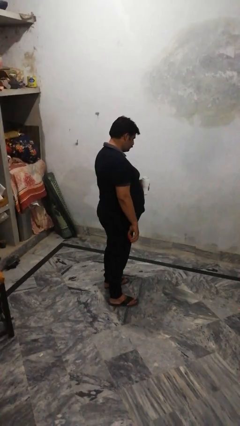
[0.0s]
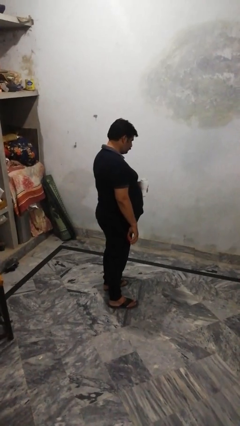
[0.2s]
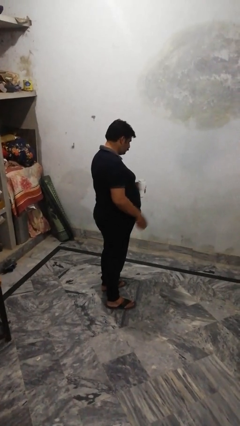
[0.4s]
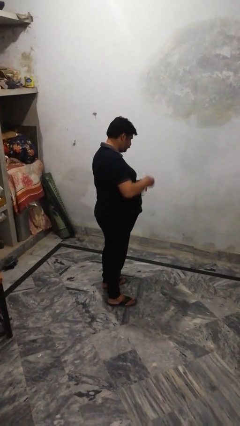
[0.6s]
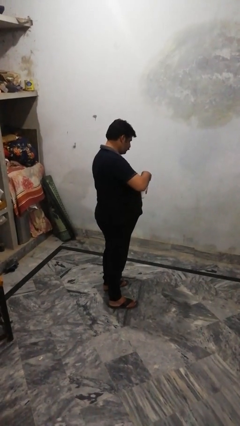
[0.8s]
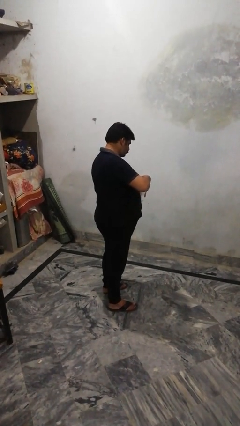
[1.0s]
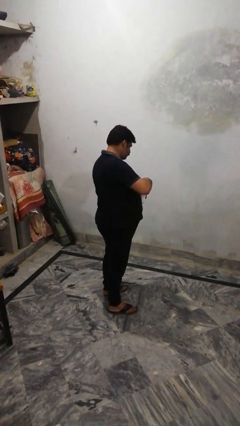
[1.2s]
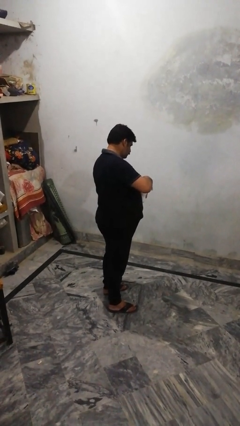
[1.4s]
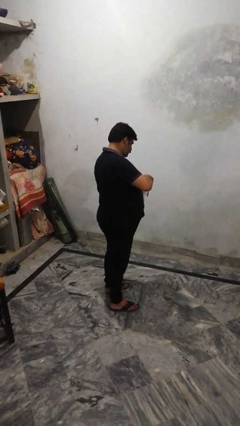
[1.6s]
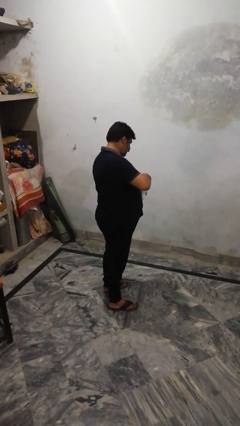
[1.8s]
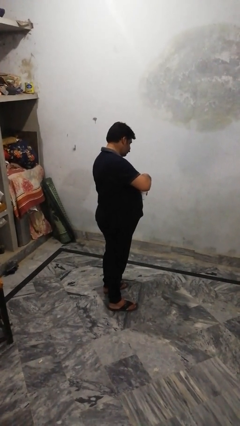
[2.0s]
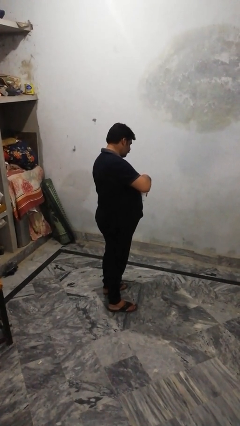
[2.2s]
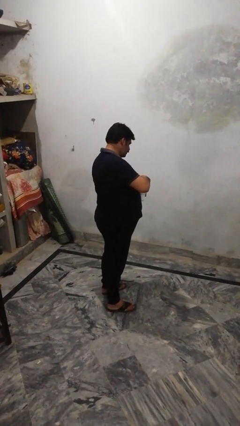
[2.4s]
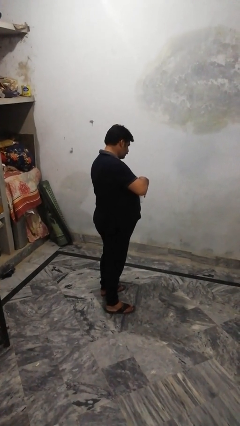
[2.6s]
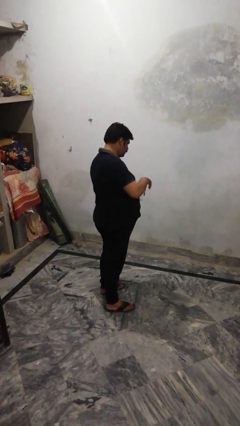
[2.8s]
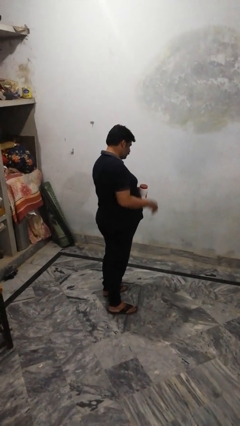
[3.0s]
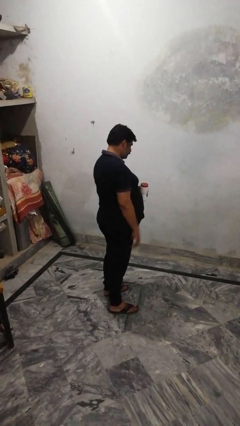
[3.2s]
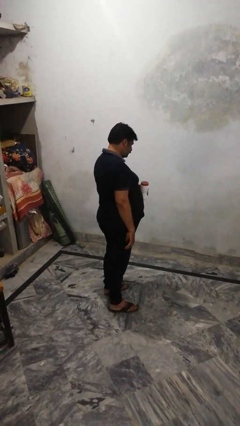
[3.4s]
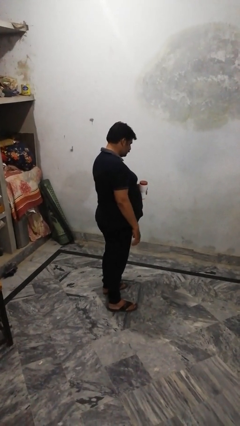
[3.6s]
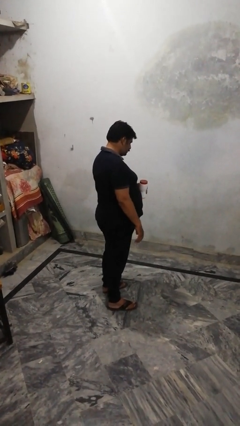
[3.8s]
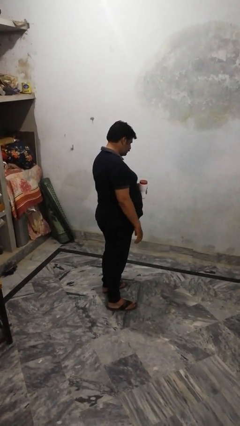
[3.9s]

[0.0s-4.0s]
person closes jar

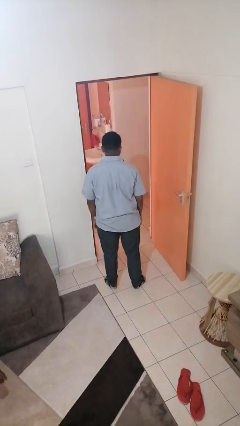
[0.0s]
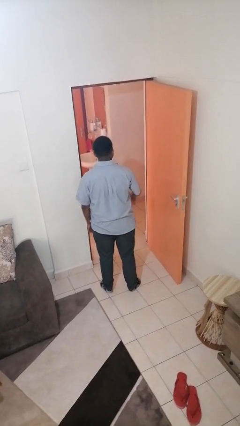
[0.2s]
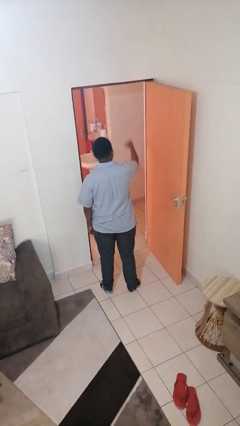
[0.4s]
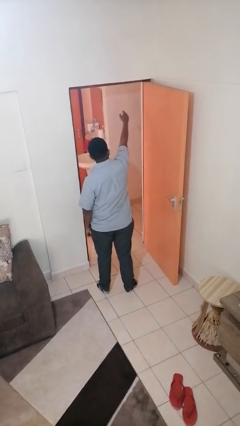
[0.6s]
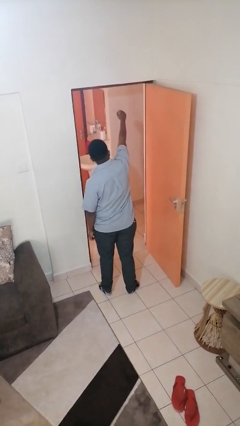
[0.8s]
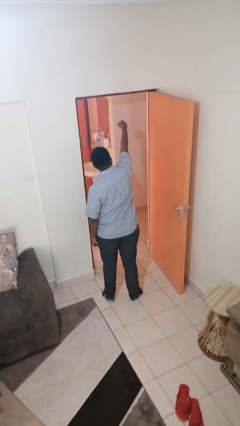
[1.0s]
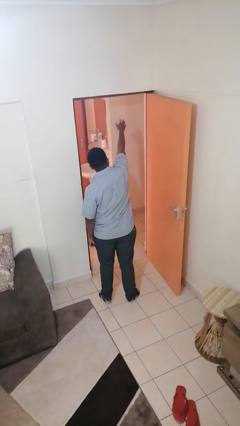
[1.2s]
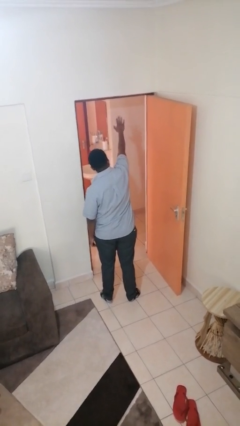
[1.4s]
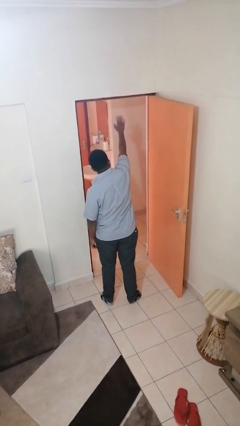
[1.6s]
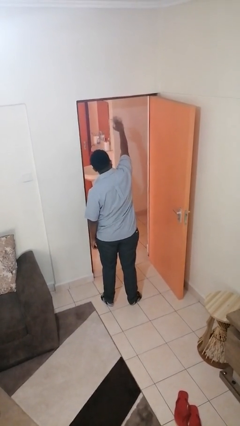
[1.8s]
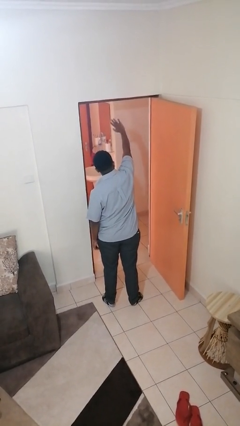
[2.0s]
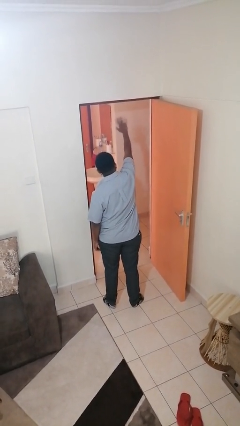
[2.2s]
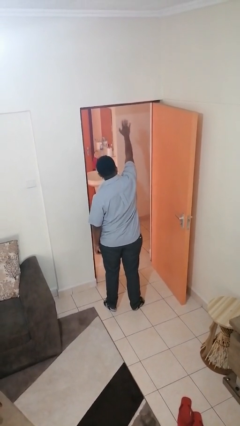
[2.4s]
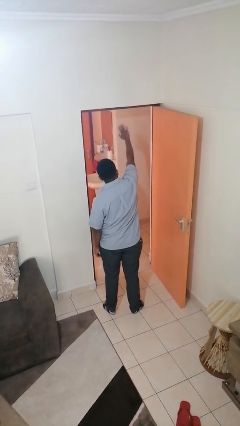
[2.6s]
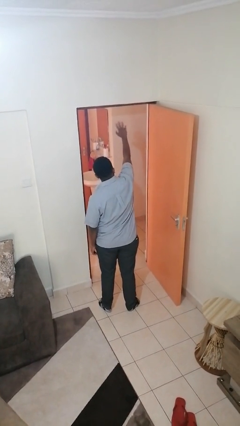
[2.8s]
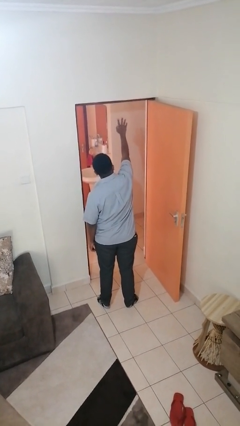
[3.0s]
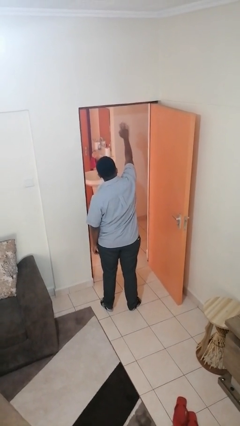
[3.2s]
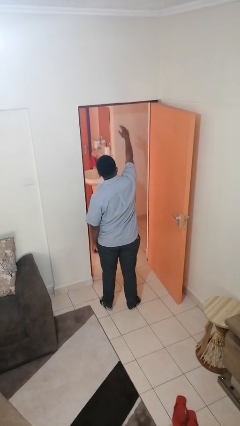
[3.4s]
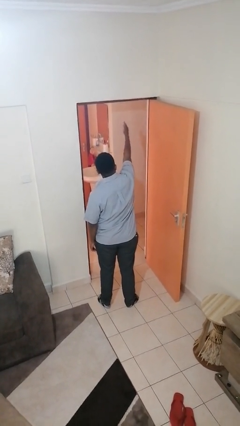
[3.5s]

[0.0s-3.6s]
person waves at person

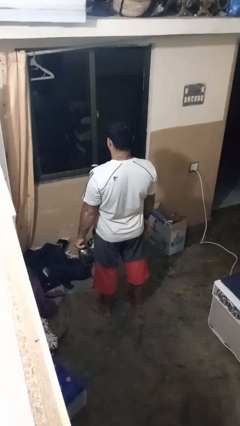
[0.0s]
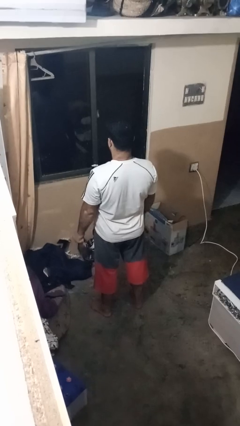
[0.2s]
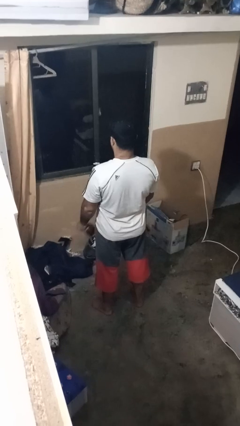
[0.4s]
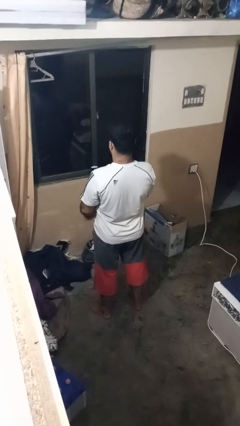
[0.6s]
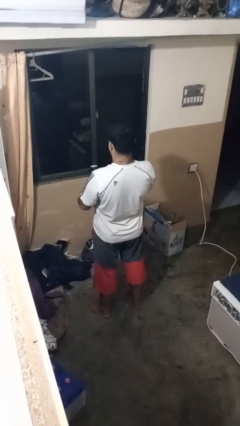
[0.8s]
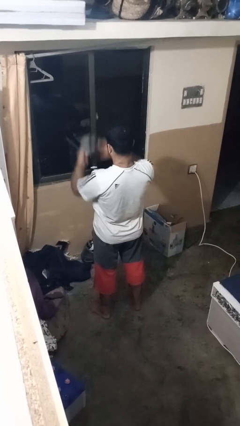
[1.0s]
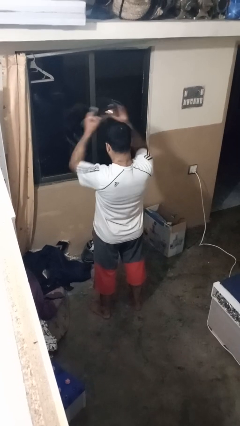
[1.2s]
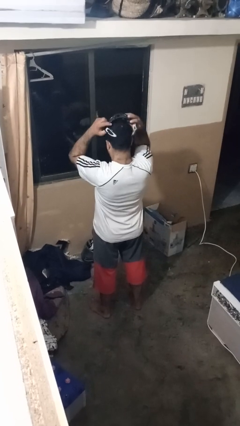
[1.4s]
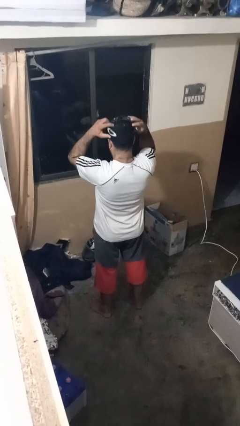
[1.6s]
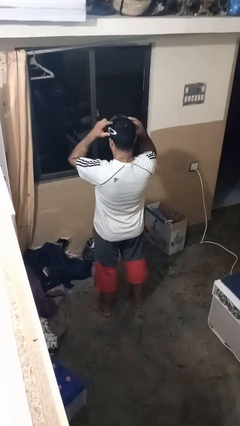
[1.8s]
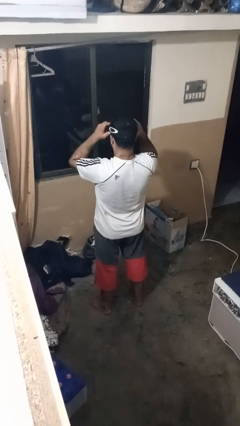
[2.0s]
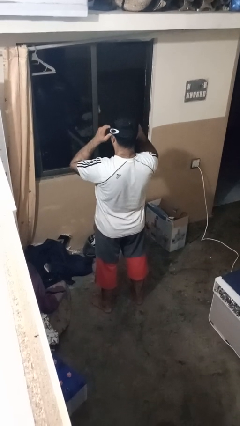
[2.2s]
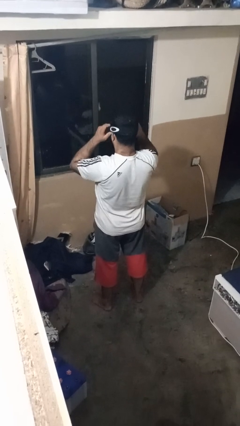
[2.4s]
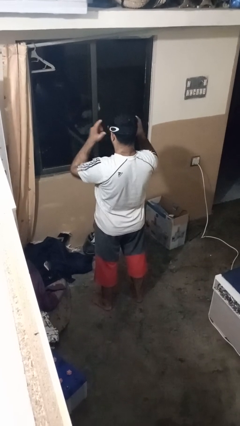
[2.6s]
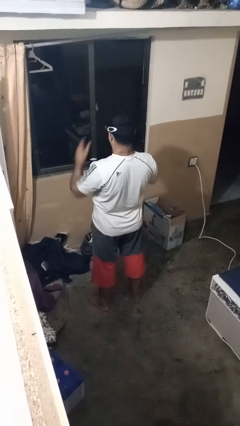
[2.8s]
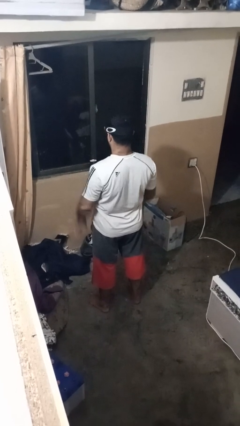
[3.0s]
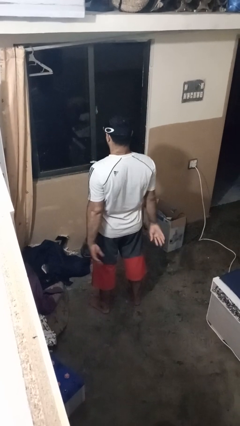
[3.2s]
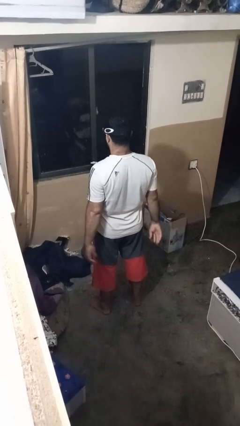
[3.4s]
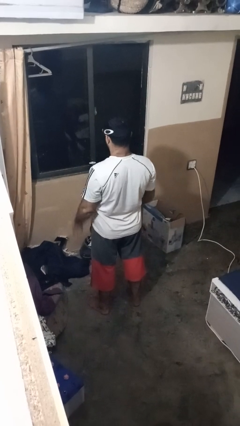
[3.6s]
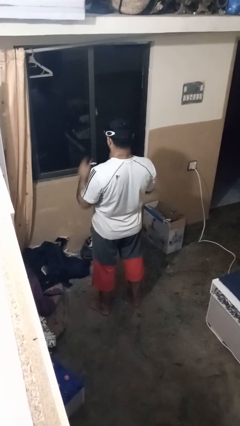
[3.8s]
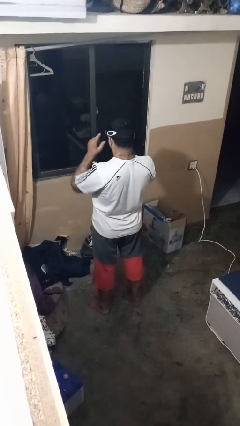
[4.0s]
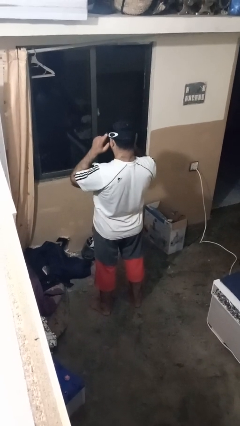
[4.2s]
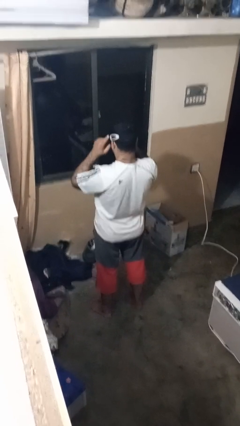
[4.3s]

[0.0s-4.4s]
person puts on sunglasses

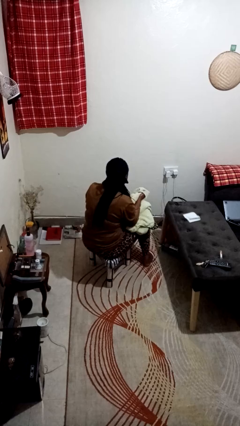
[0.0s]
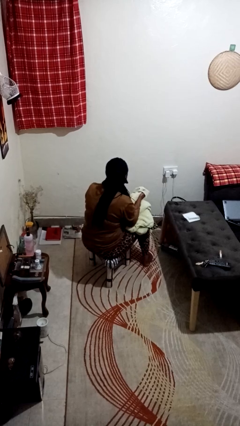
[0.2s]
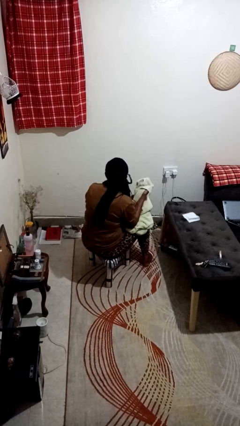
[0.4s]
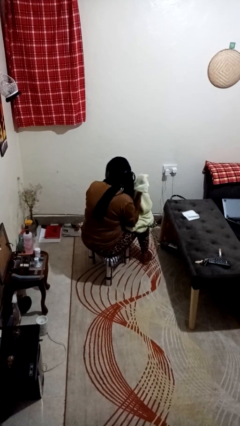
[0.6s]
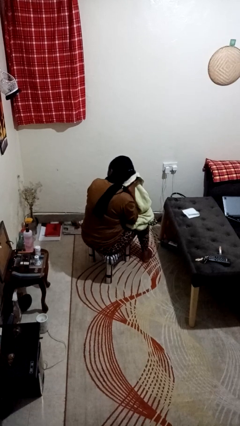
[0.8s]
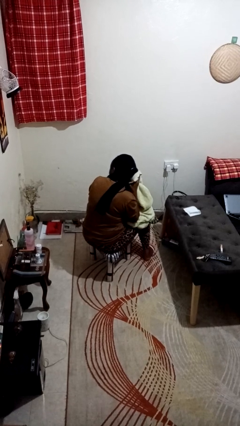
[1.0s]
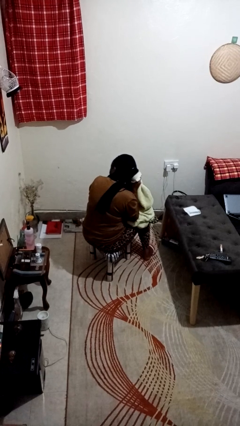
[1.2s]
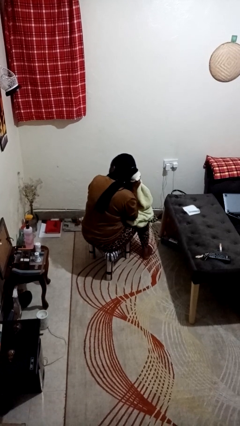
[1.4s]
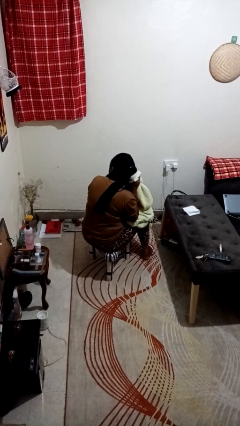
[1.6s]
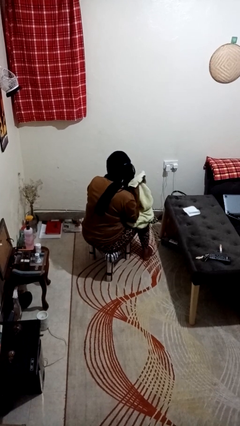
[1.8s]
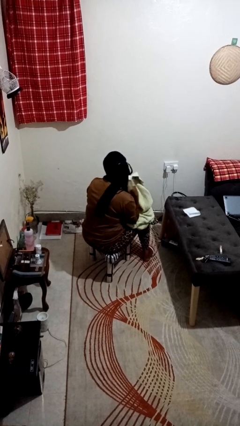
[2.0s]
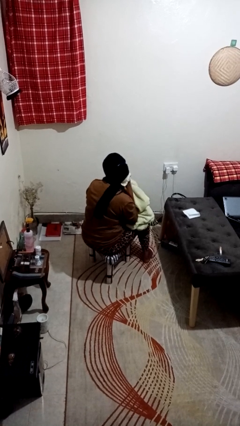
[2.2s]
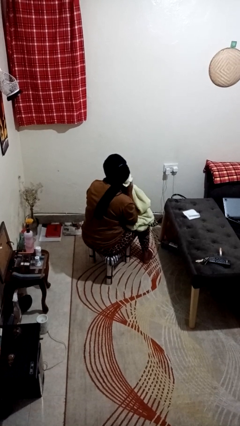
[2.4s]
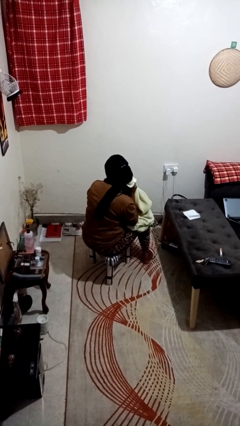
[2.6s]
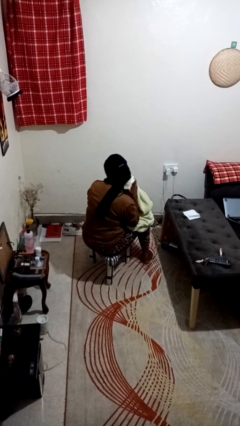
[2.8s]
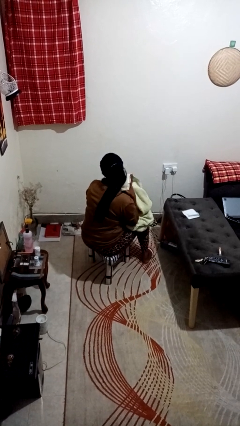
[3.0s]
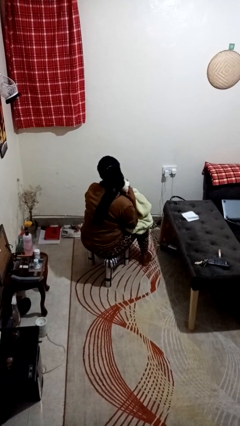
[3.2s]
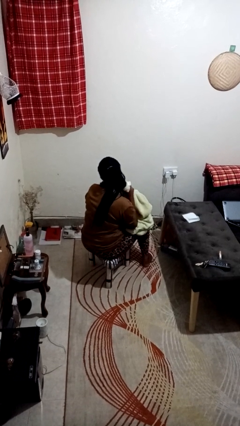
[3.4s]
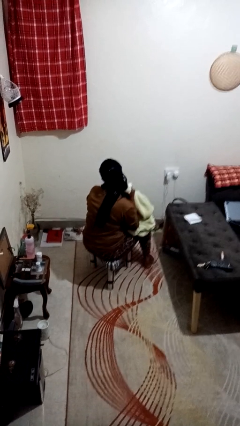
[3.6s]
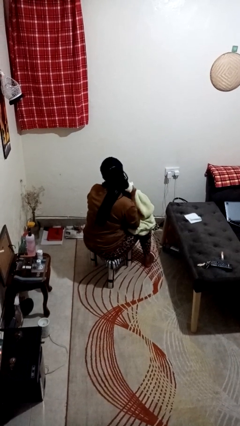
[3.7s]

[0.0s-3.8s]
person dries hair with towel

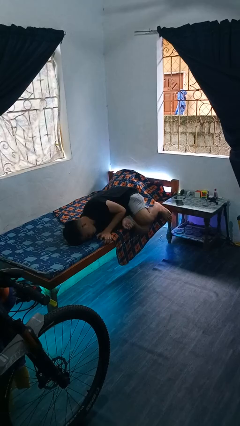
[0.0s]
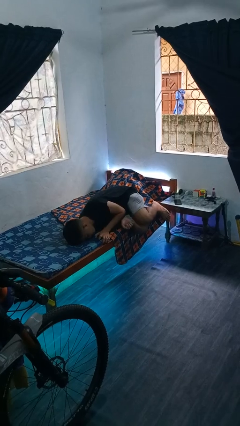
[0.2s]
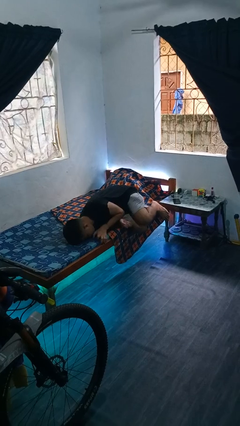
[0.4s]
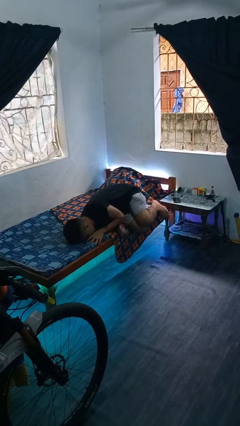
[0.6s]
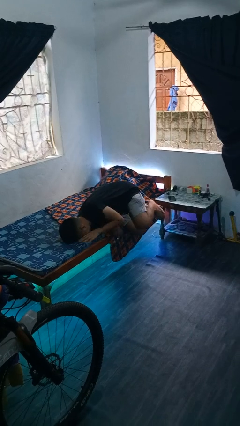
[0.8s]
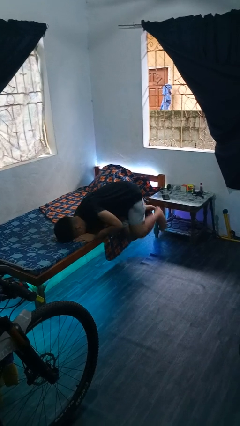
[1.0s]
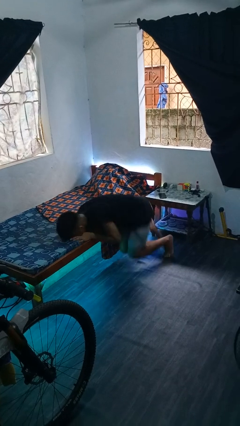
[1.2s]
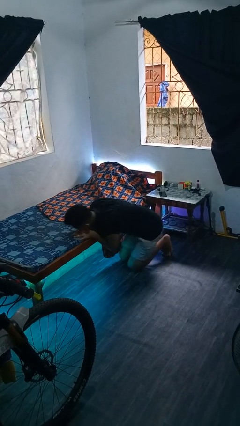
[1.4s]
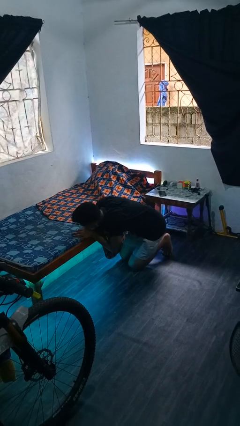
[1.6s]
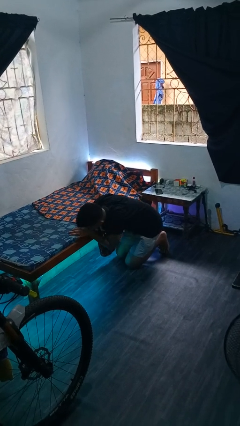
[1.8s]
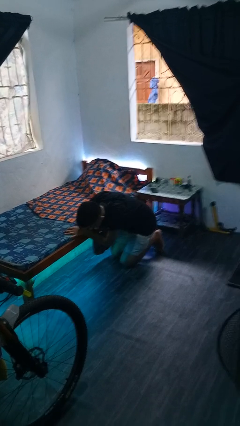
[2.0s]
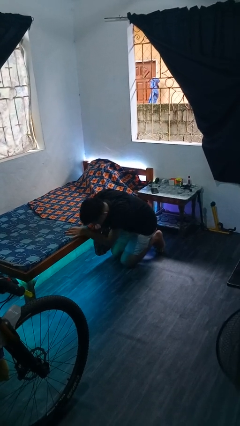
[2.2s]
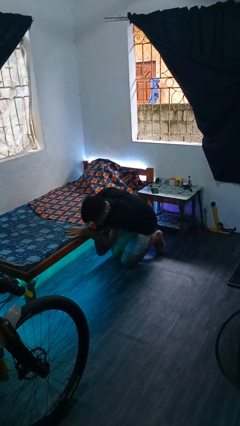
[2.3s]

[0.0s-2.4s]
person falls from bed
